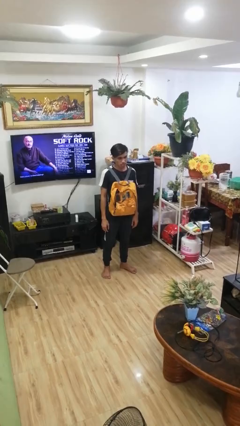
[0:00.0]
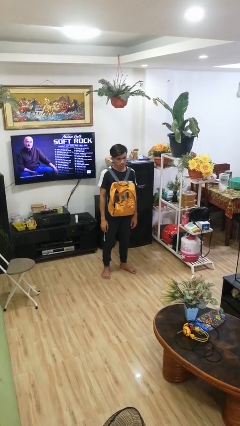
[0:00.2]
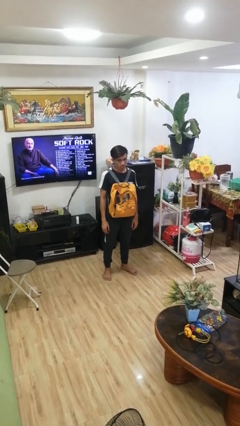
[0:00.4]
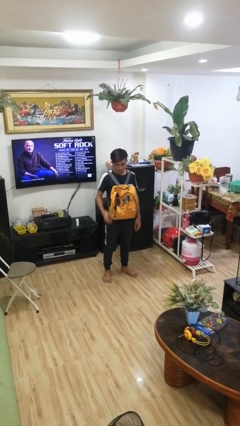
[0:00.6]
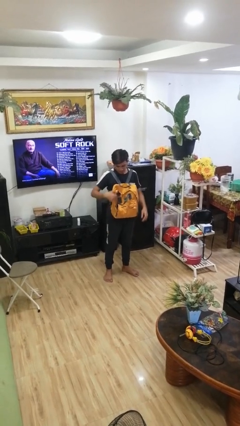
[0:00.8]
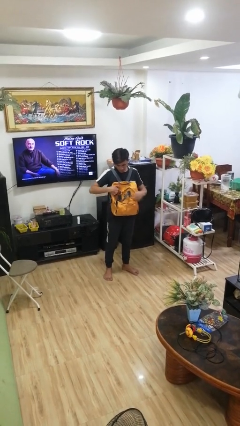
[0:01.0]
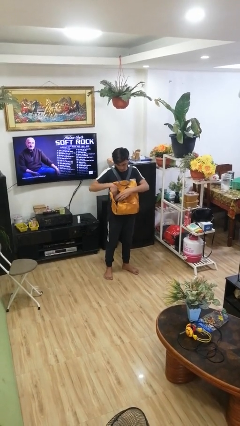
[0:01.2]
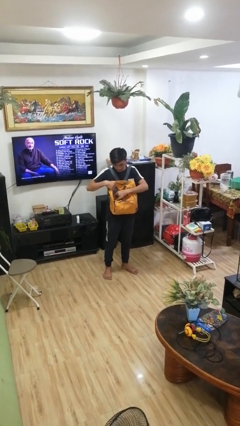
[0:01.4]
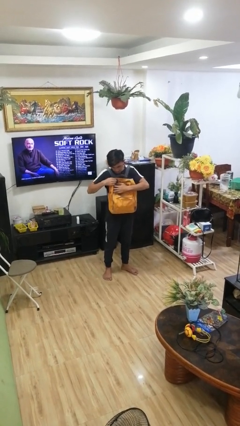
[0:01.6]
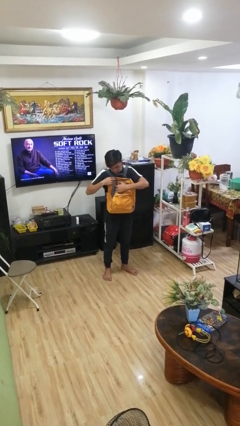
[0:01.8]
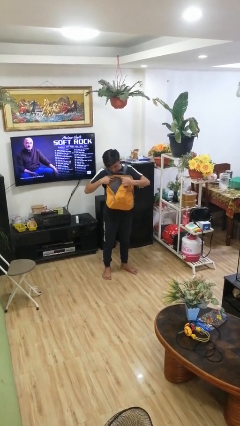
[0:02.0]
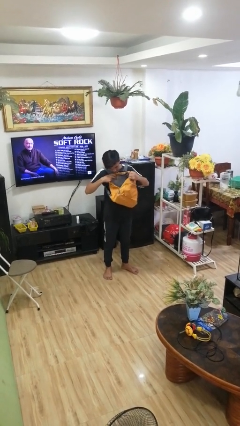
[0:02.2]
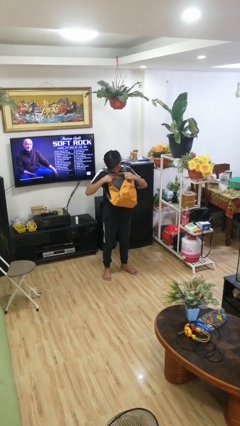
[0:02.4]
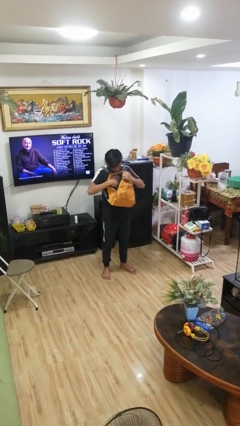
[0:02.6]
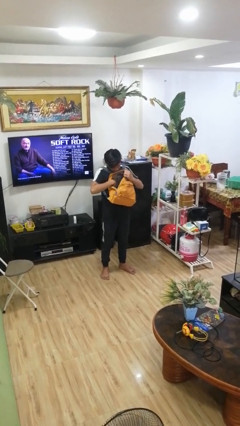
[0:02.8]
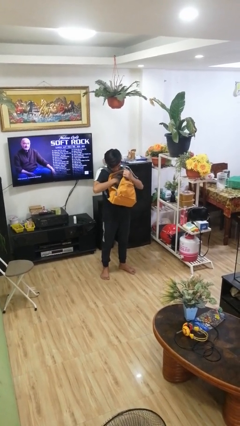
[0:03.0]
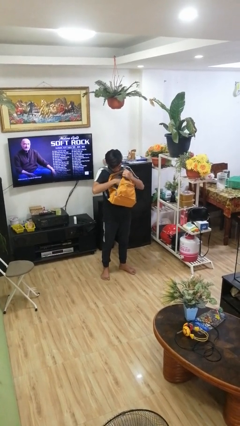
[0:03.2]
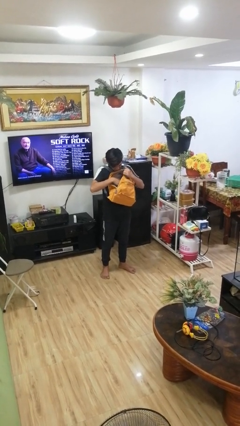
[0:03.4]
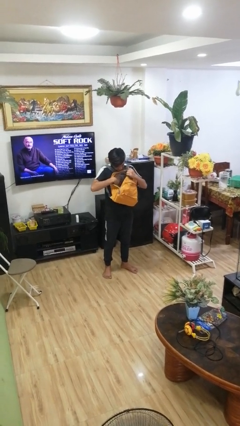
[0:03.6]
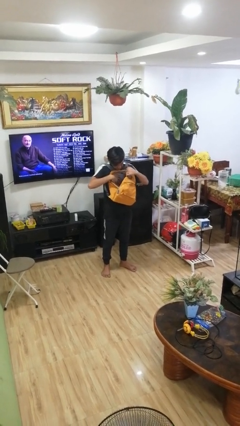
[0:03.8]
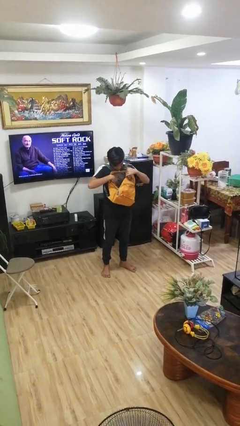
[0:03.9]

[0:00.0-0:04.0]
person searches in backpack

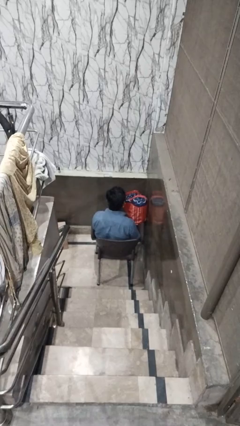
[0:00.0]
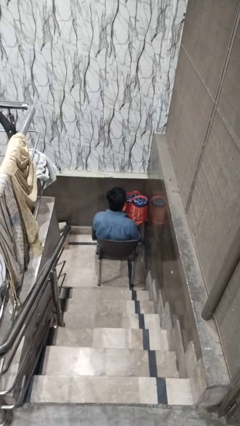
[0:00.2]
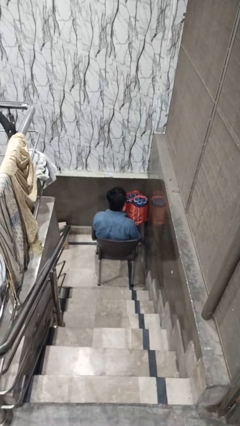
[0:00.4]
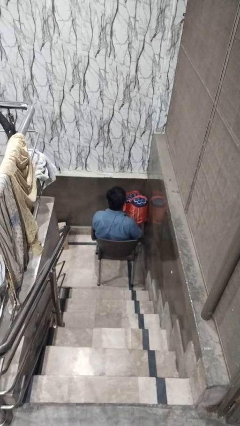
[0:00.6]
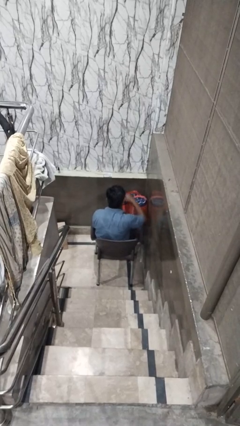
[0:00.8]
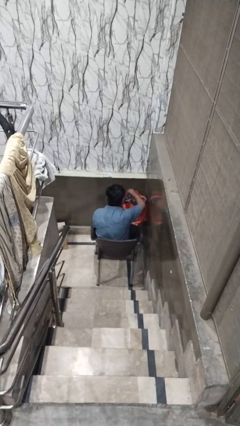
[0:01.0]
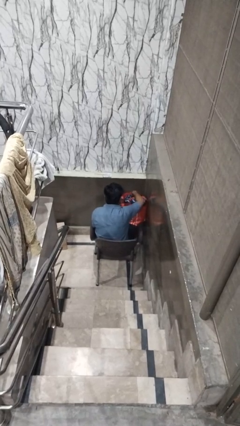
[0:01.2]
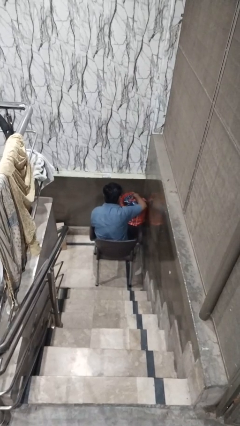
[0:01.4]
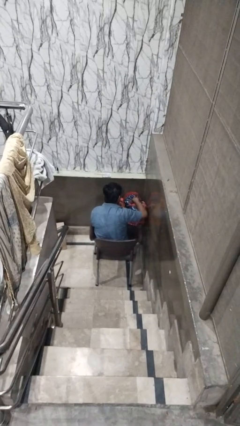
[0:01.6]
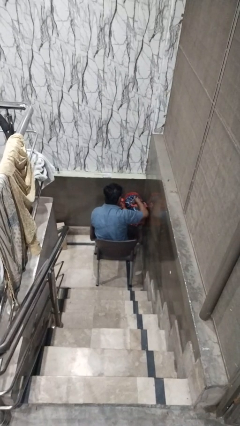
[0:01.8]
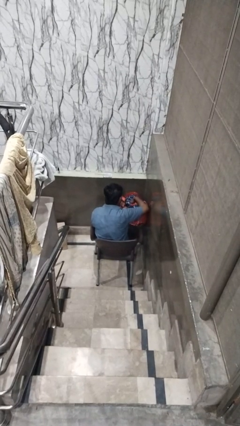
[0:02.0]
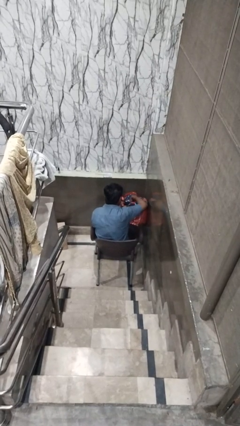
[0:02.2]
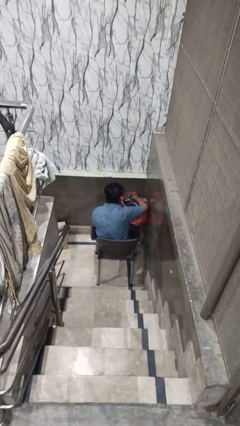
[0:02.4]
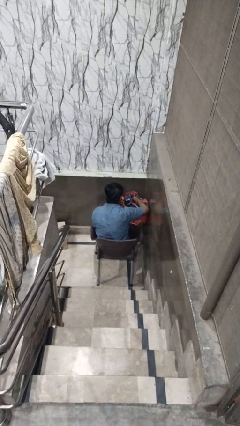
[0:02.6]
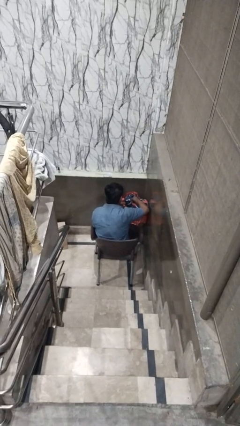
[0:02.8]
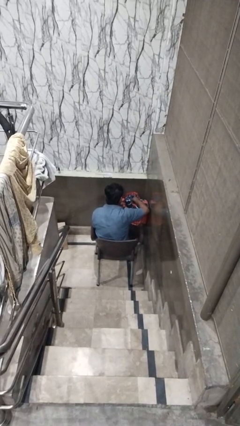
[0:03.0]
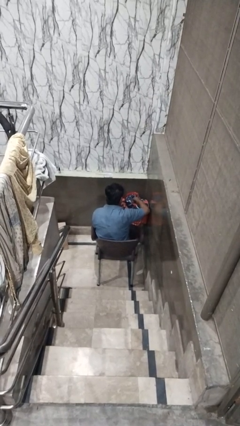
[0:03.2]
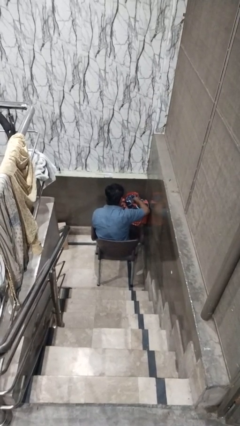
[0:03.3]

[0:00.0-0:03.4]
person searches in bag

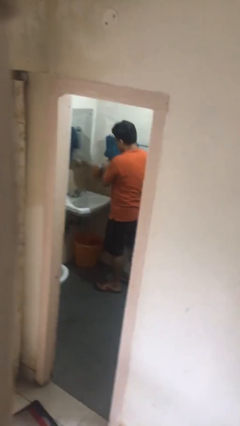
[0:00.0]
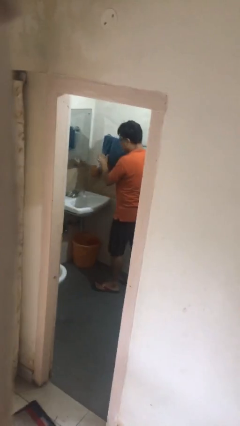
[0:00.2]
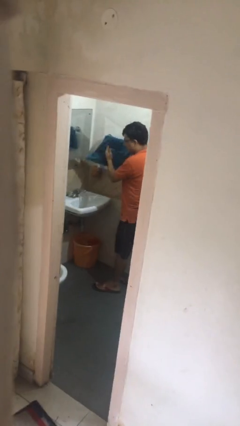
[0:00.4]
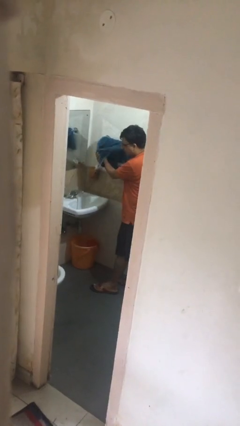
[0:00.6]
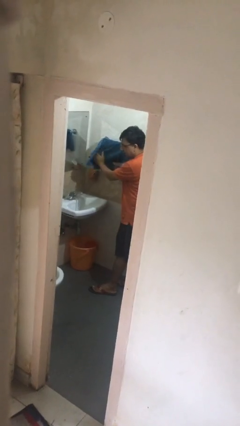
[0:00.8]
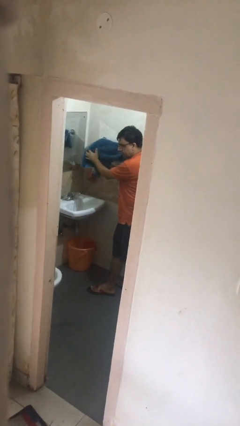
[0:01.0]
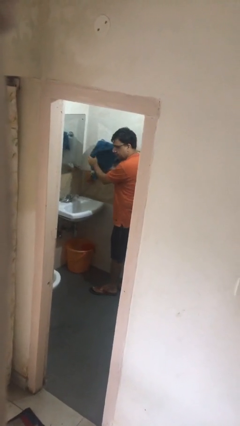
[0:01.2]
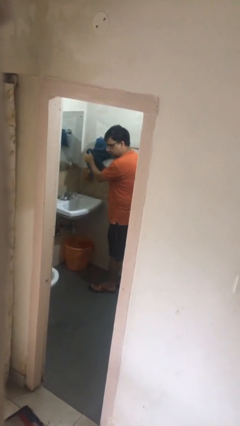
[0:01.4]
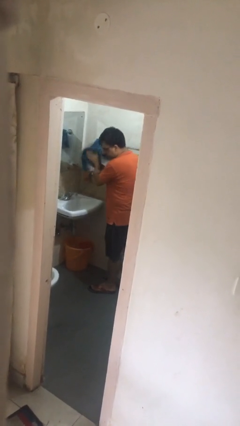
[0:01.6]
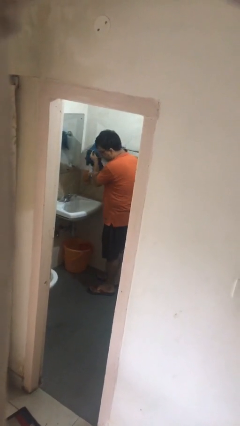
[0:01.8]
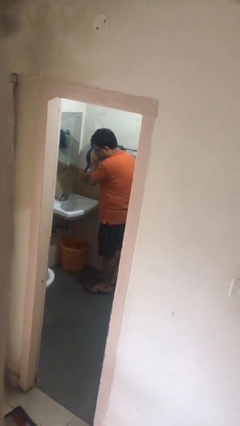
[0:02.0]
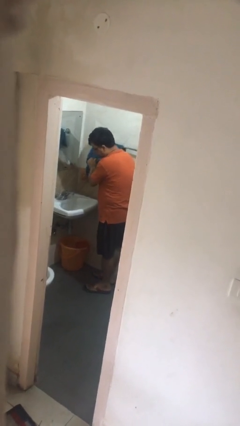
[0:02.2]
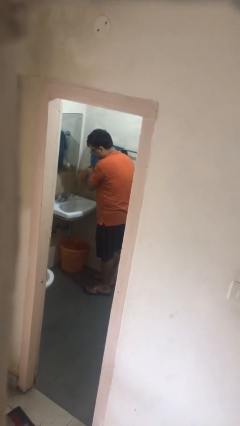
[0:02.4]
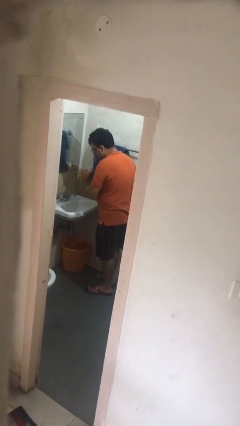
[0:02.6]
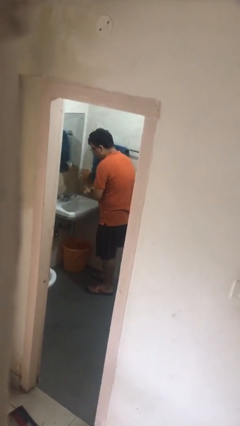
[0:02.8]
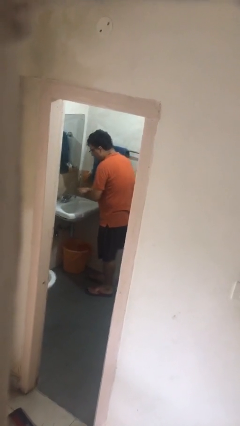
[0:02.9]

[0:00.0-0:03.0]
person dries hands with towel

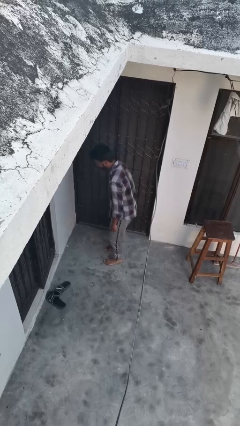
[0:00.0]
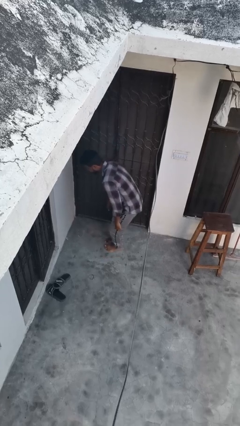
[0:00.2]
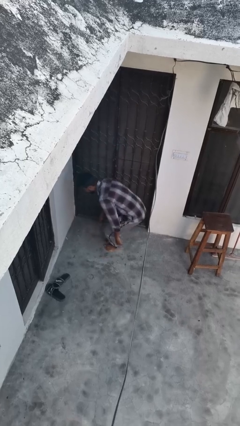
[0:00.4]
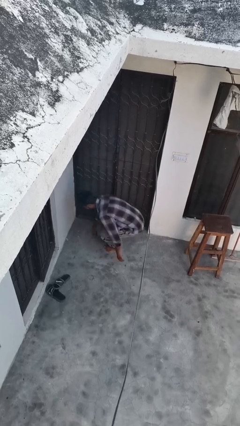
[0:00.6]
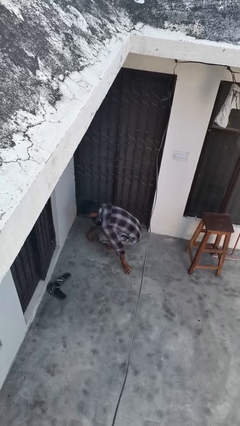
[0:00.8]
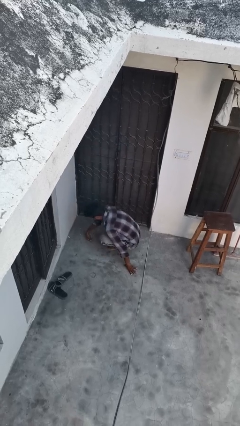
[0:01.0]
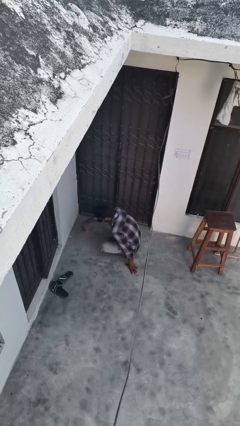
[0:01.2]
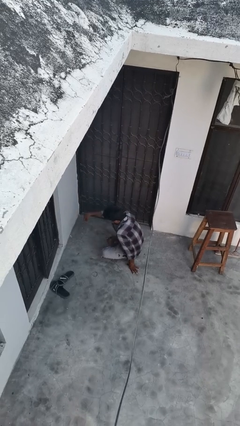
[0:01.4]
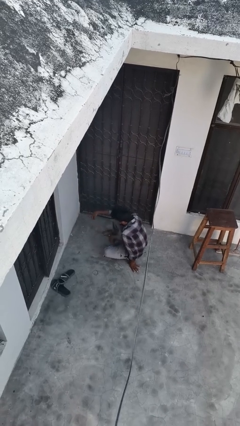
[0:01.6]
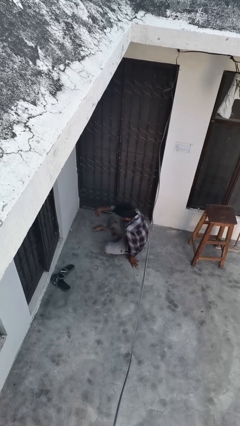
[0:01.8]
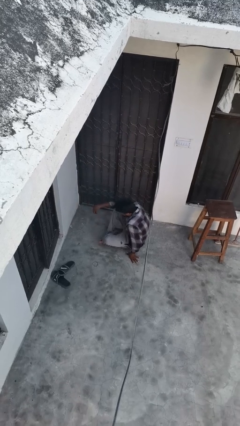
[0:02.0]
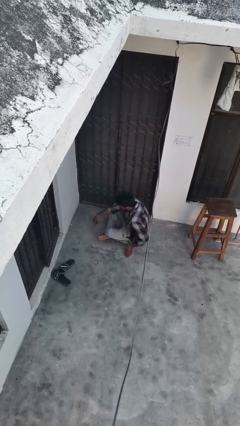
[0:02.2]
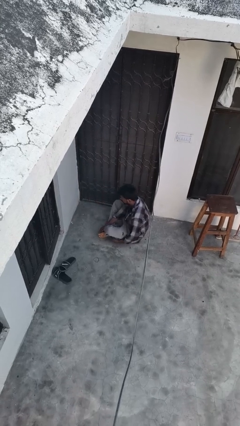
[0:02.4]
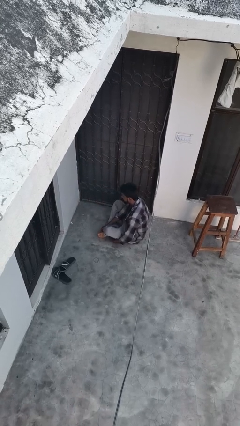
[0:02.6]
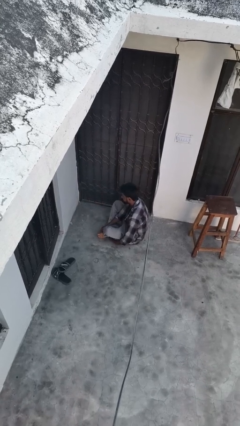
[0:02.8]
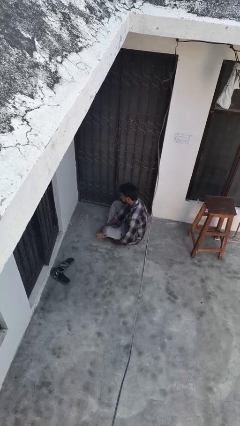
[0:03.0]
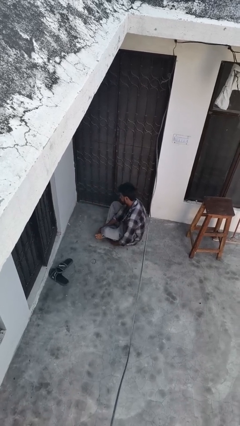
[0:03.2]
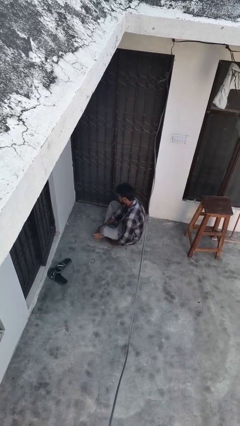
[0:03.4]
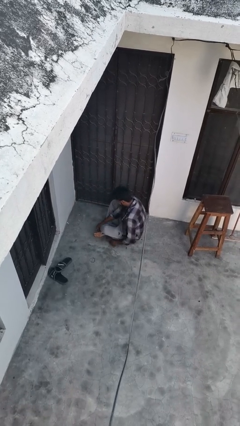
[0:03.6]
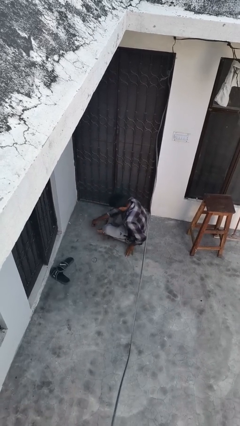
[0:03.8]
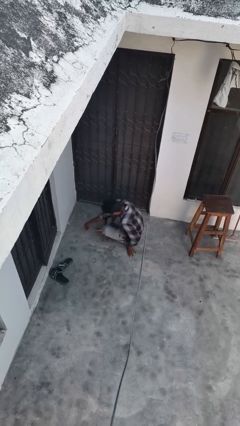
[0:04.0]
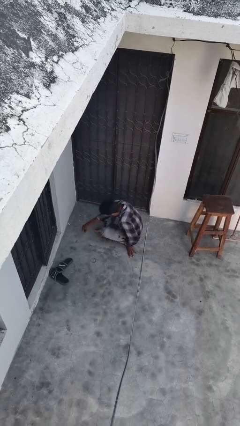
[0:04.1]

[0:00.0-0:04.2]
person sits crisscross

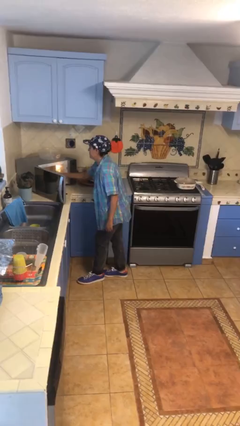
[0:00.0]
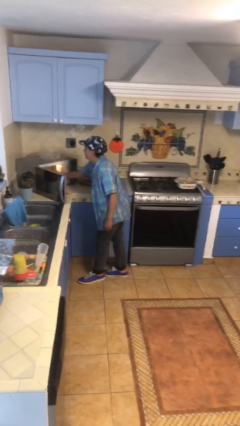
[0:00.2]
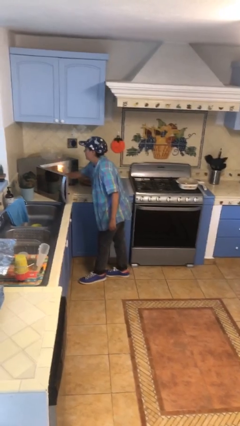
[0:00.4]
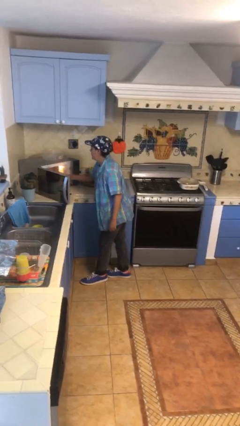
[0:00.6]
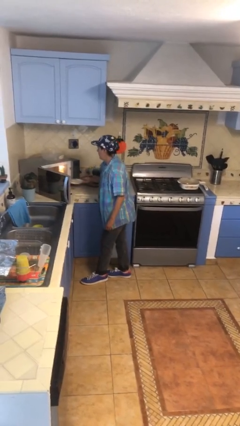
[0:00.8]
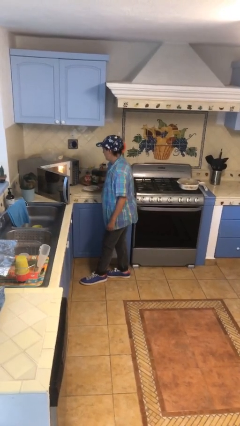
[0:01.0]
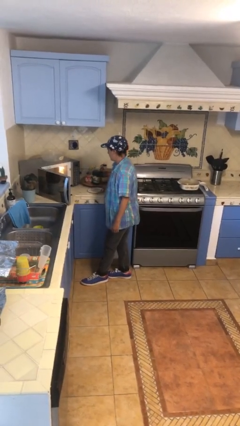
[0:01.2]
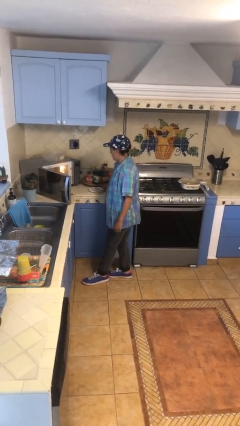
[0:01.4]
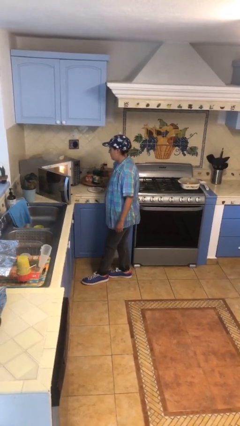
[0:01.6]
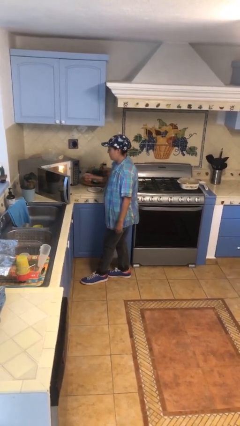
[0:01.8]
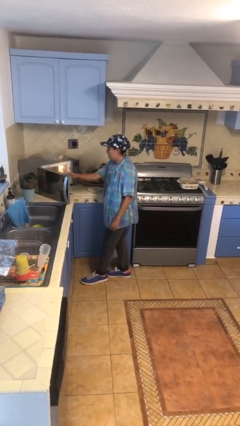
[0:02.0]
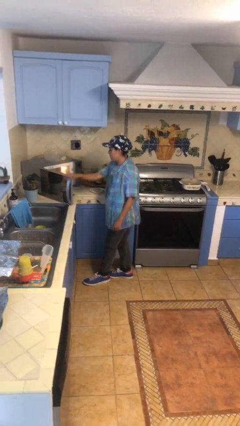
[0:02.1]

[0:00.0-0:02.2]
person takes object from microwave

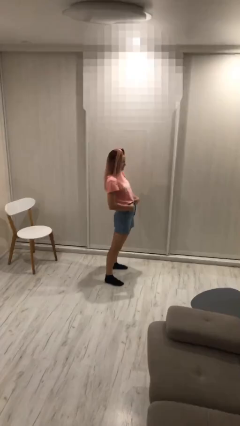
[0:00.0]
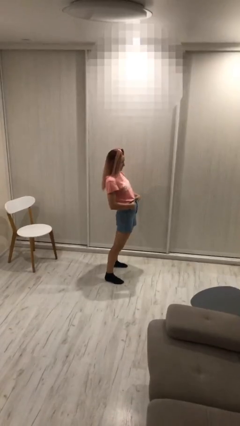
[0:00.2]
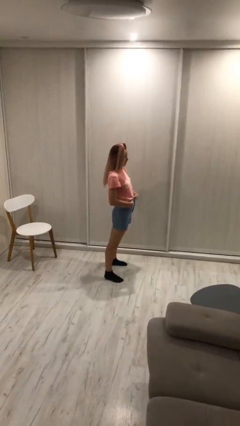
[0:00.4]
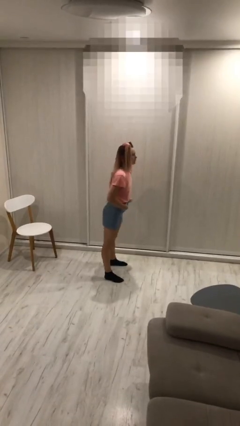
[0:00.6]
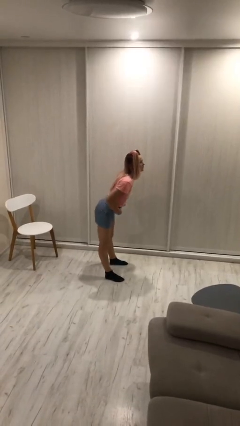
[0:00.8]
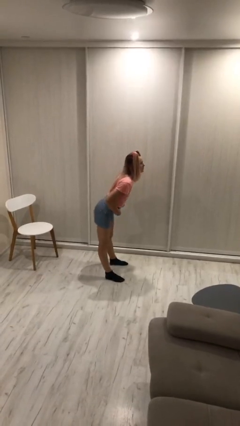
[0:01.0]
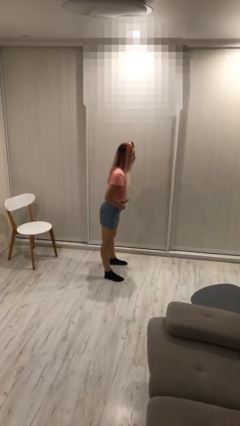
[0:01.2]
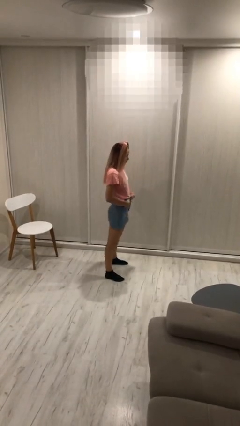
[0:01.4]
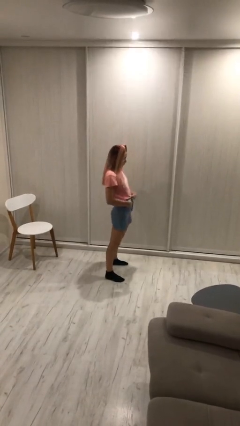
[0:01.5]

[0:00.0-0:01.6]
person wiggles hips
